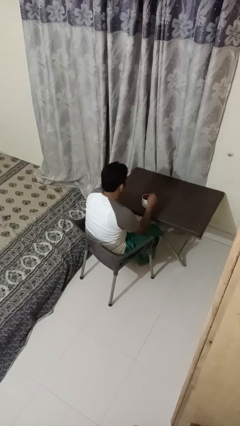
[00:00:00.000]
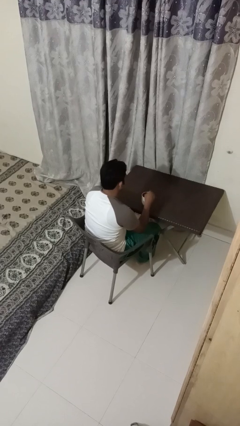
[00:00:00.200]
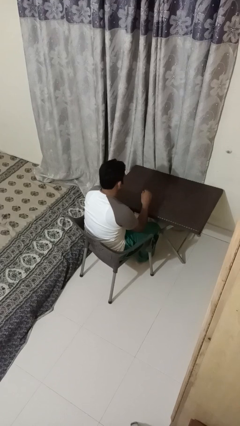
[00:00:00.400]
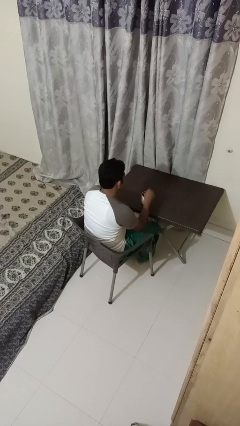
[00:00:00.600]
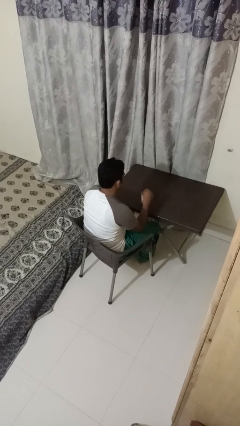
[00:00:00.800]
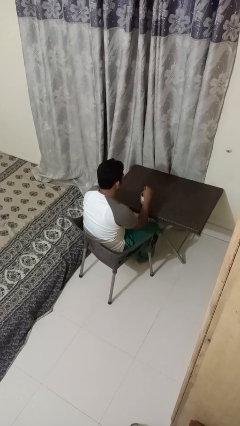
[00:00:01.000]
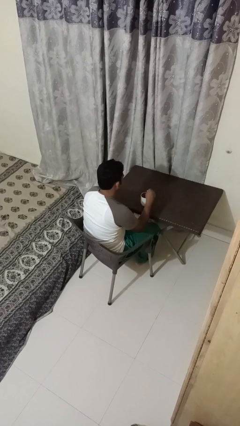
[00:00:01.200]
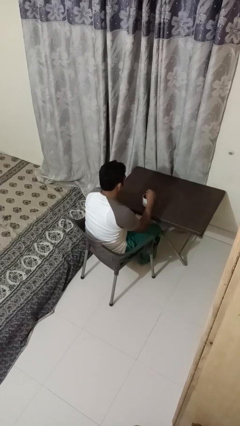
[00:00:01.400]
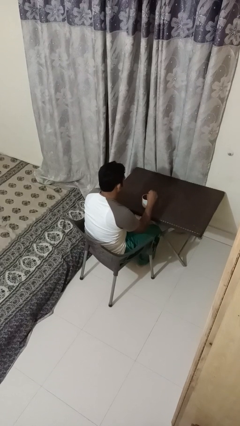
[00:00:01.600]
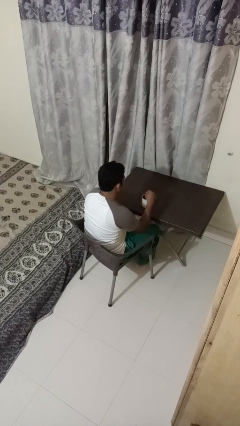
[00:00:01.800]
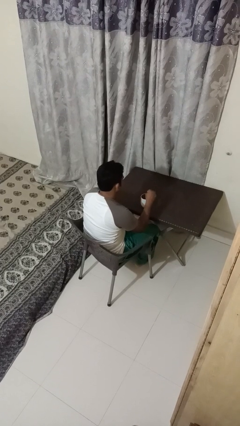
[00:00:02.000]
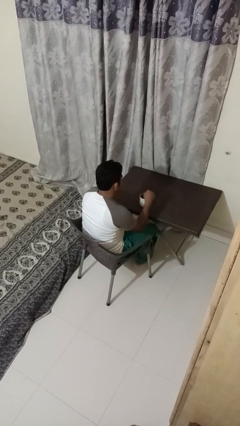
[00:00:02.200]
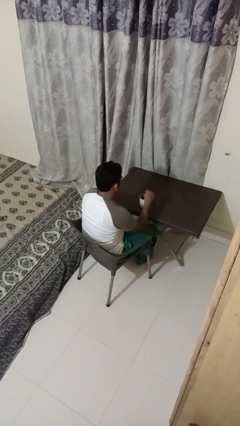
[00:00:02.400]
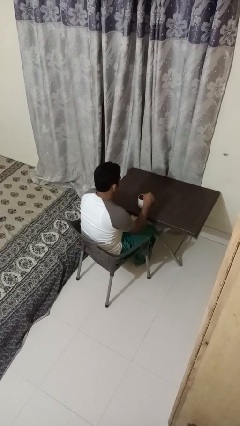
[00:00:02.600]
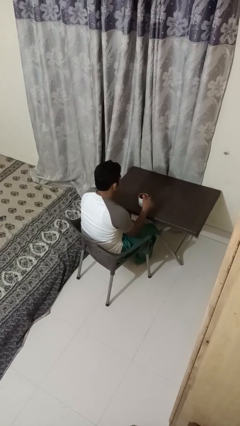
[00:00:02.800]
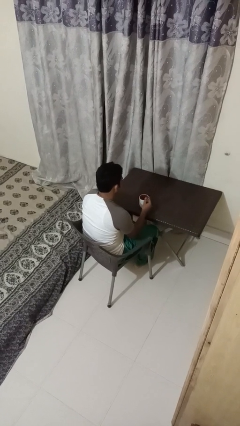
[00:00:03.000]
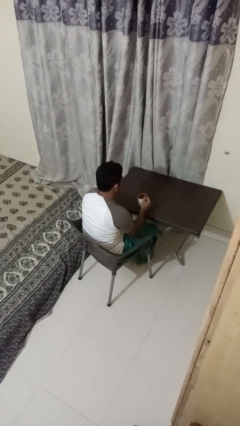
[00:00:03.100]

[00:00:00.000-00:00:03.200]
person stirs mug

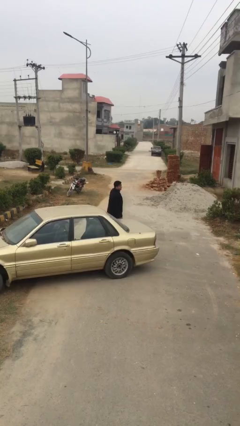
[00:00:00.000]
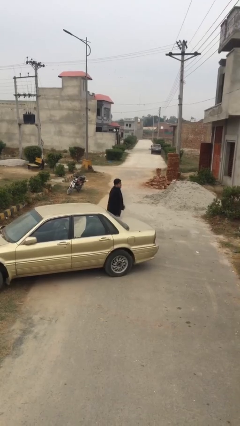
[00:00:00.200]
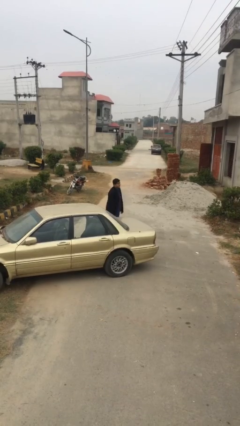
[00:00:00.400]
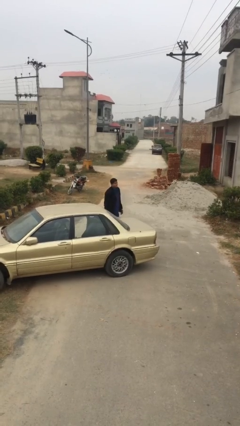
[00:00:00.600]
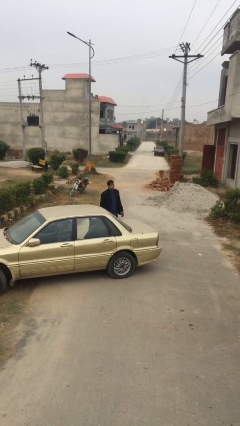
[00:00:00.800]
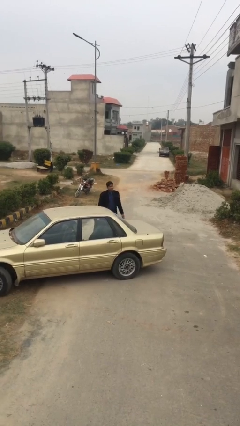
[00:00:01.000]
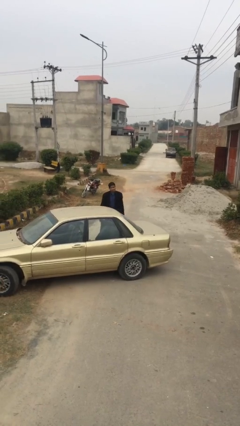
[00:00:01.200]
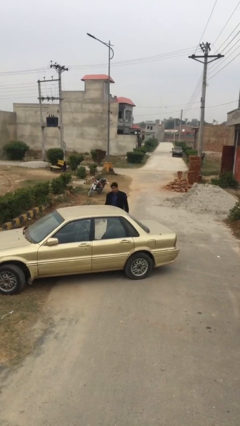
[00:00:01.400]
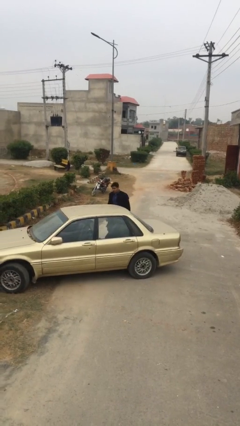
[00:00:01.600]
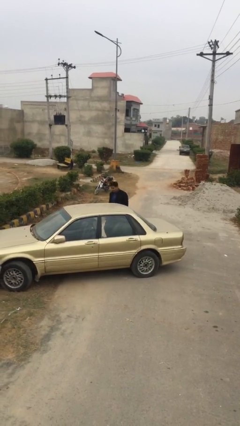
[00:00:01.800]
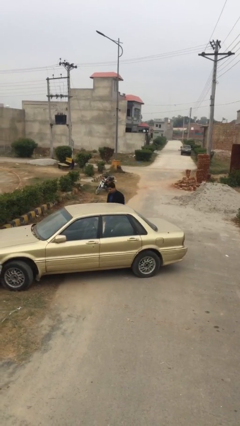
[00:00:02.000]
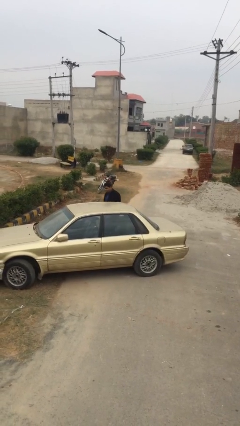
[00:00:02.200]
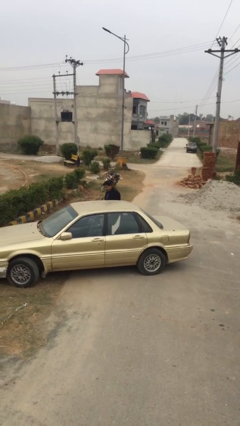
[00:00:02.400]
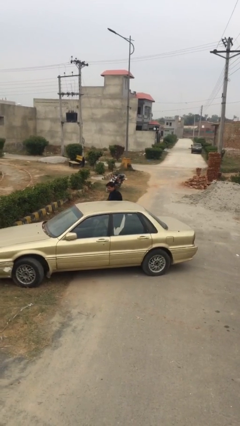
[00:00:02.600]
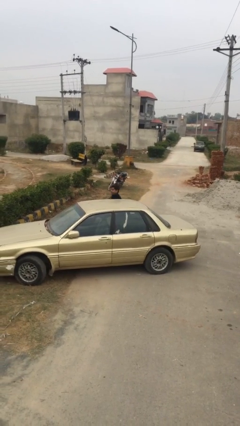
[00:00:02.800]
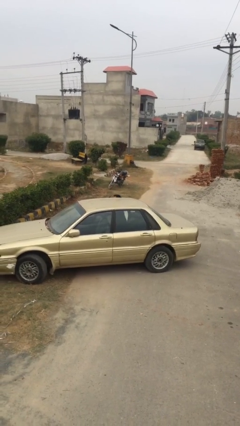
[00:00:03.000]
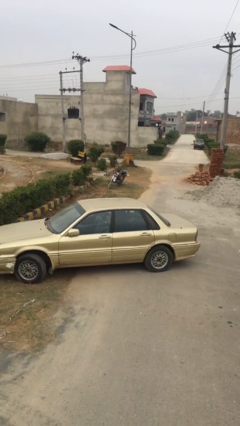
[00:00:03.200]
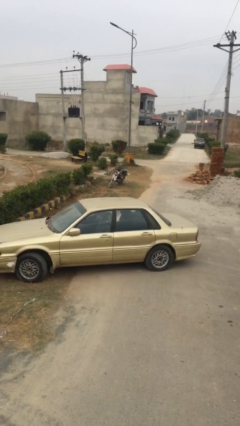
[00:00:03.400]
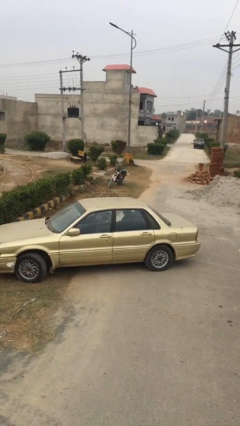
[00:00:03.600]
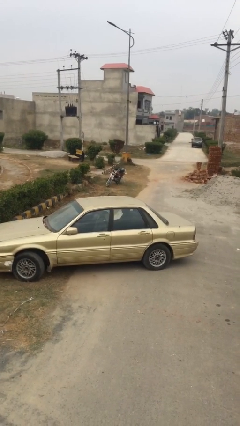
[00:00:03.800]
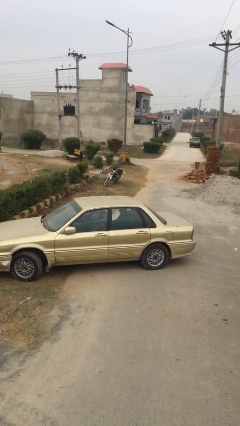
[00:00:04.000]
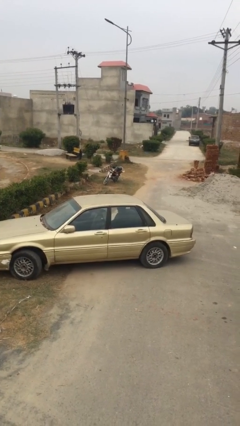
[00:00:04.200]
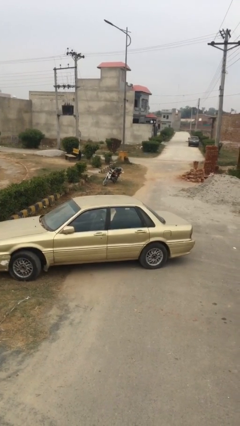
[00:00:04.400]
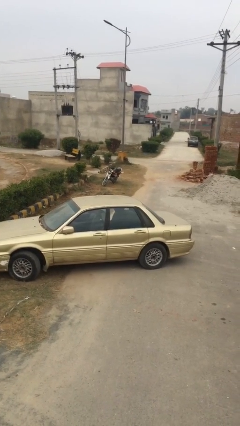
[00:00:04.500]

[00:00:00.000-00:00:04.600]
person enters car

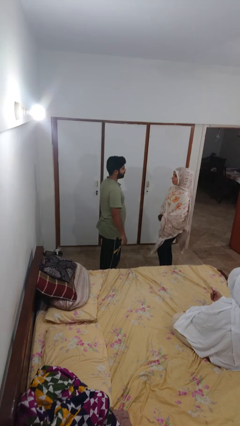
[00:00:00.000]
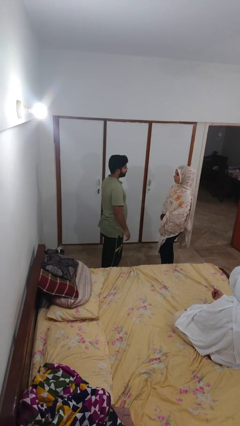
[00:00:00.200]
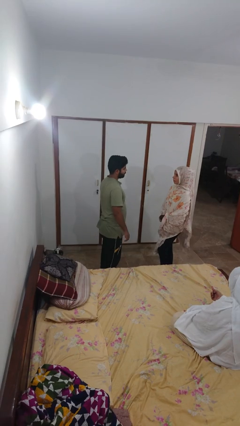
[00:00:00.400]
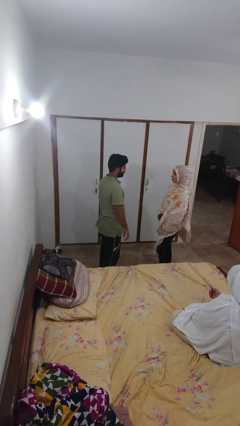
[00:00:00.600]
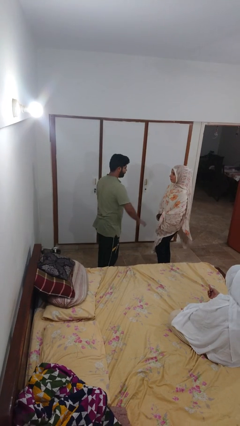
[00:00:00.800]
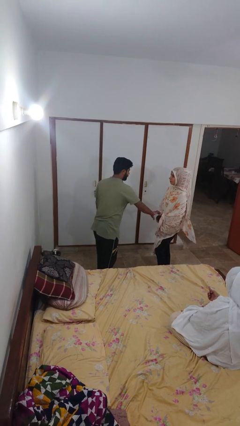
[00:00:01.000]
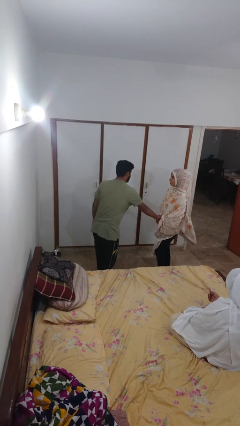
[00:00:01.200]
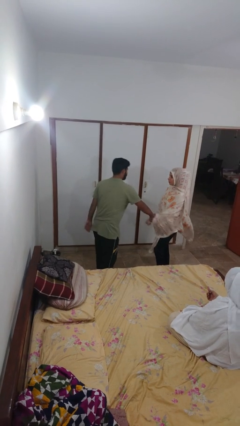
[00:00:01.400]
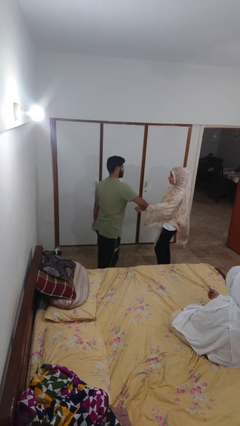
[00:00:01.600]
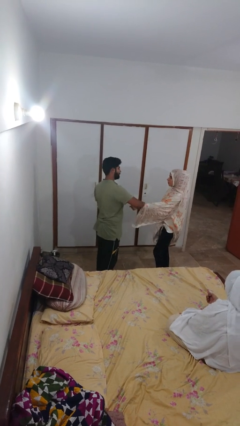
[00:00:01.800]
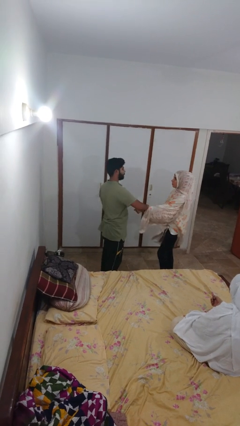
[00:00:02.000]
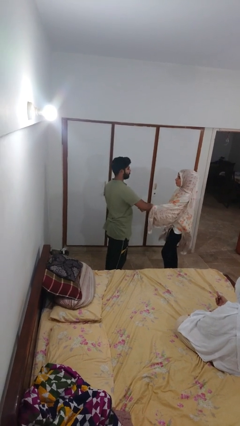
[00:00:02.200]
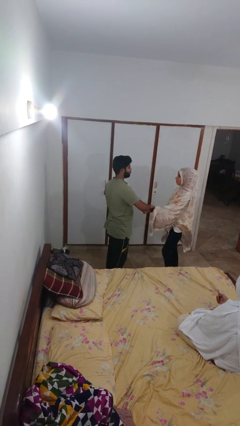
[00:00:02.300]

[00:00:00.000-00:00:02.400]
person grabs person by forearm

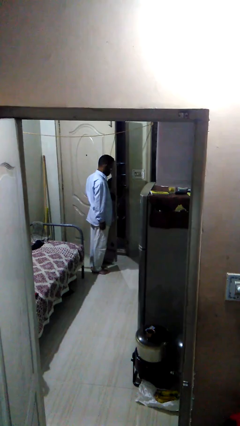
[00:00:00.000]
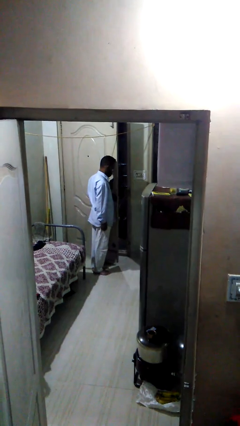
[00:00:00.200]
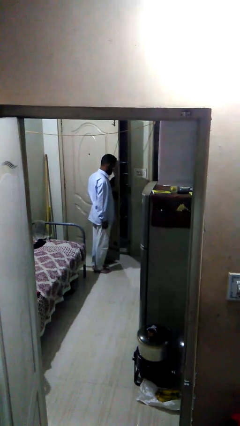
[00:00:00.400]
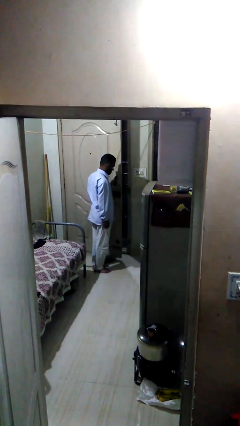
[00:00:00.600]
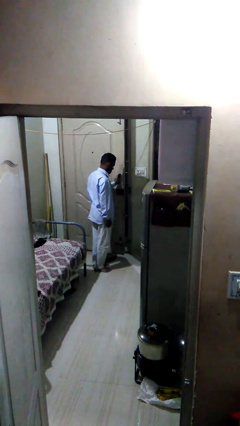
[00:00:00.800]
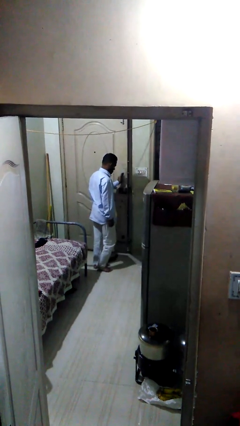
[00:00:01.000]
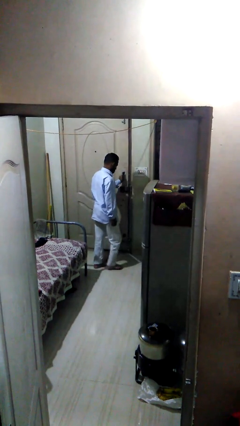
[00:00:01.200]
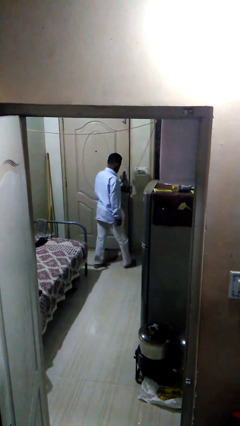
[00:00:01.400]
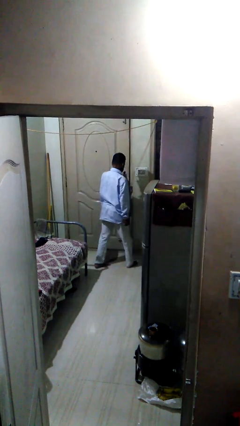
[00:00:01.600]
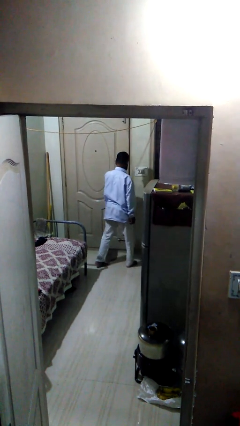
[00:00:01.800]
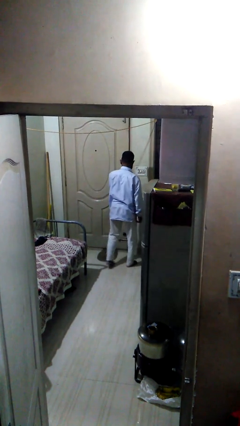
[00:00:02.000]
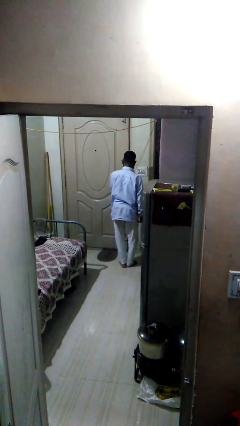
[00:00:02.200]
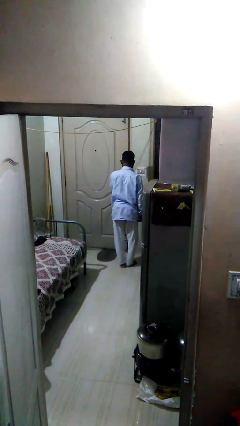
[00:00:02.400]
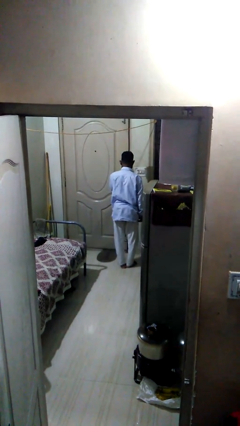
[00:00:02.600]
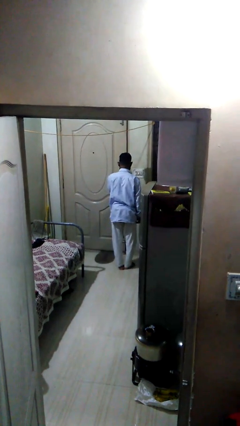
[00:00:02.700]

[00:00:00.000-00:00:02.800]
person closes facility door

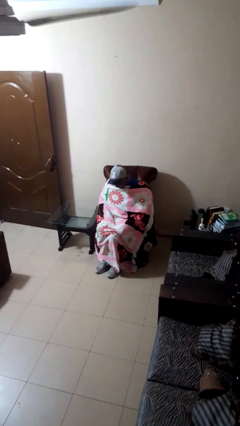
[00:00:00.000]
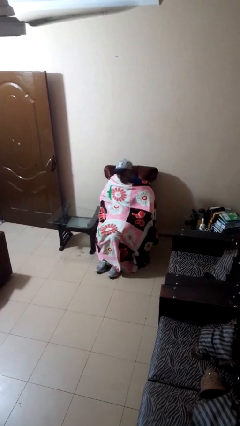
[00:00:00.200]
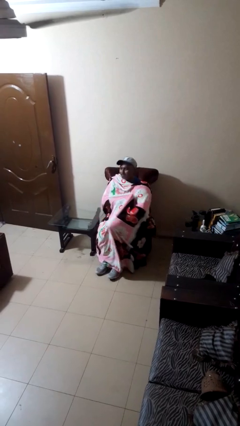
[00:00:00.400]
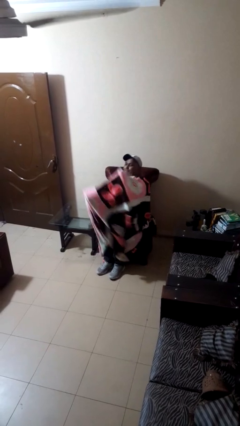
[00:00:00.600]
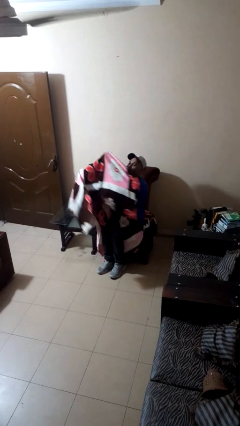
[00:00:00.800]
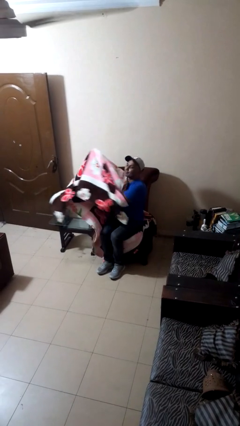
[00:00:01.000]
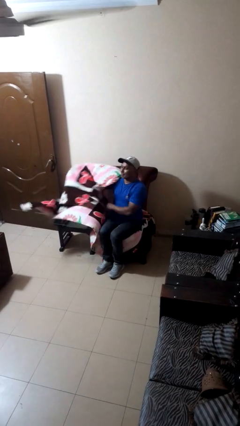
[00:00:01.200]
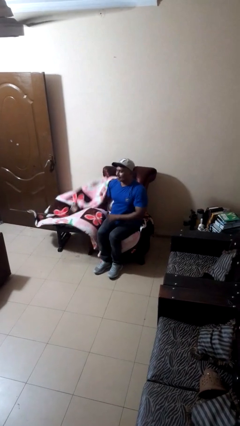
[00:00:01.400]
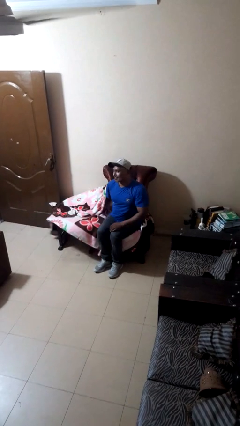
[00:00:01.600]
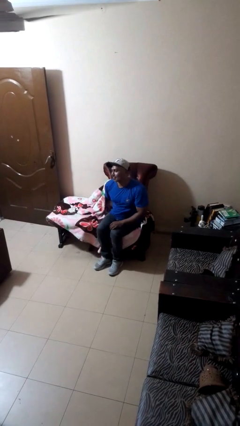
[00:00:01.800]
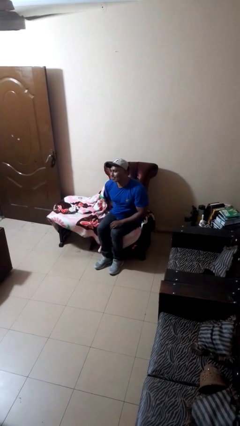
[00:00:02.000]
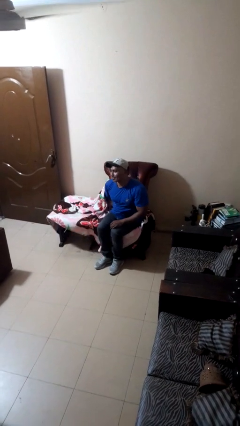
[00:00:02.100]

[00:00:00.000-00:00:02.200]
person uncovers with blanket

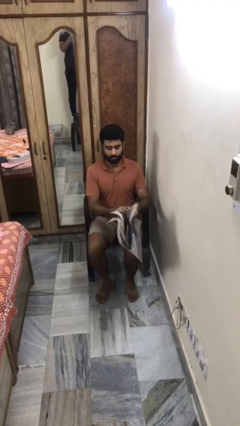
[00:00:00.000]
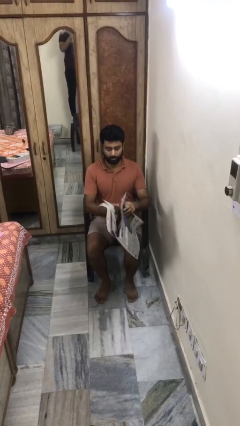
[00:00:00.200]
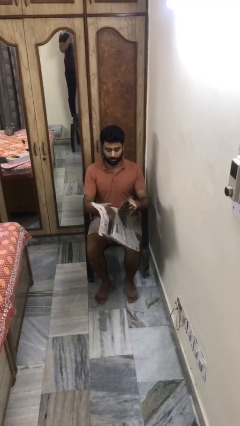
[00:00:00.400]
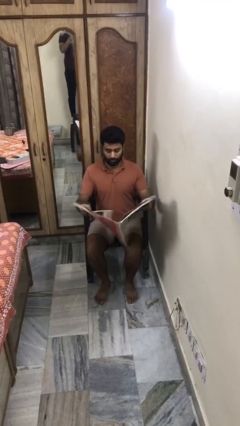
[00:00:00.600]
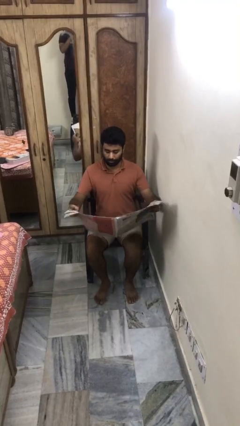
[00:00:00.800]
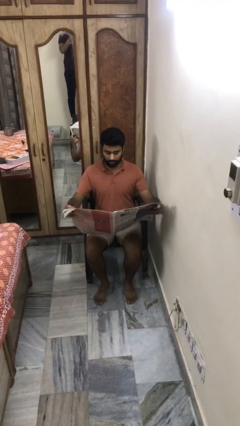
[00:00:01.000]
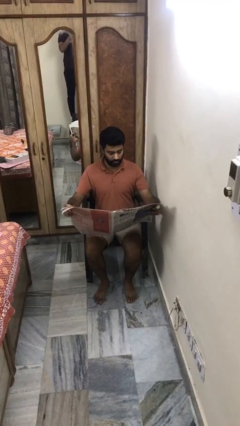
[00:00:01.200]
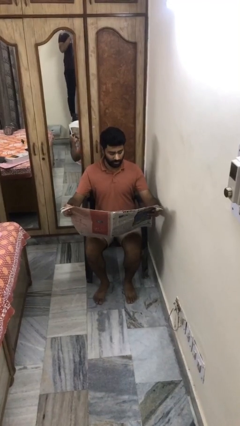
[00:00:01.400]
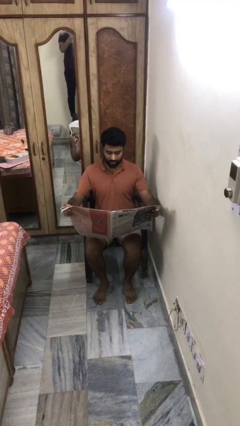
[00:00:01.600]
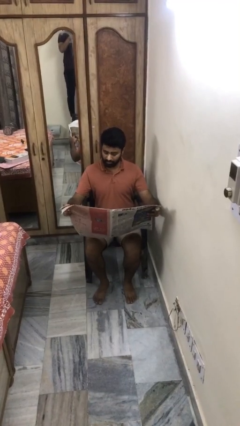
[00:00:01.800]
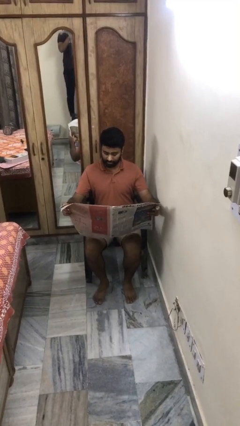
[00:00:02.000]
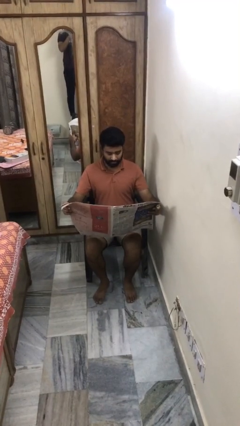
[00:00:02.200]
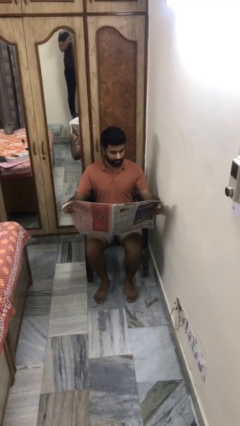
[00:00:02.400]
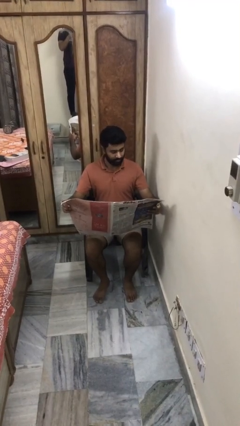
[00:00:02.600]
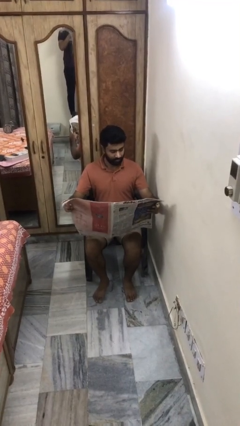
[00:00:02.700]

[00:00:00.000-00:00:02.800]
person reads newspaper
